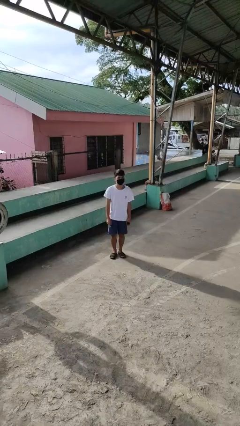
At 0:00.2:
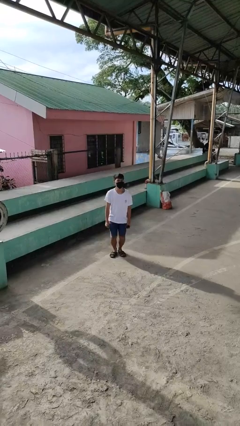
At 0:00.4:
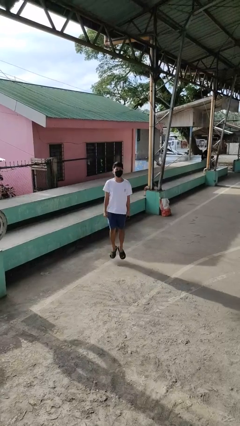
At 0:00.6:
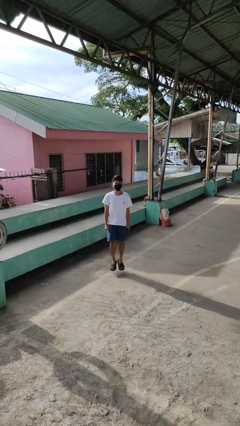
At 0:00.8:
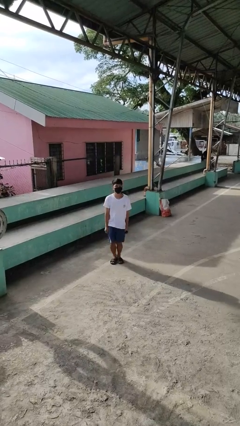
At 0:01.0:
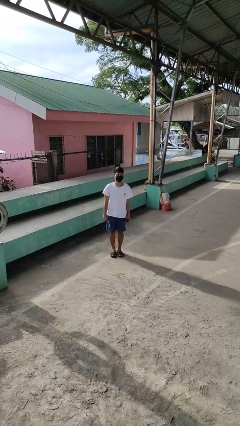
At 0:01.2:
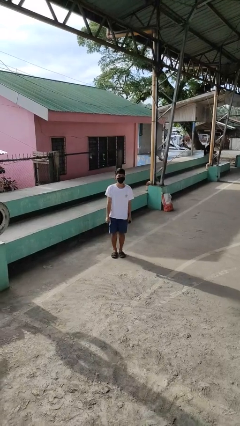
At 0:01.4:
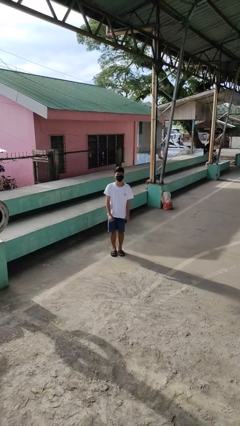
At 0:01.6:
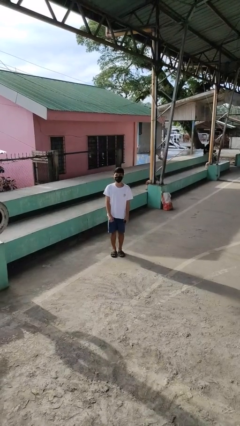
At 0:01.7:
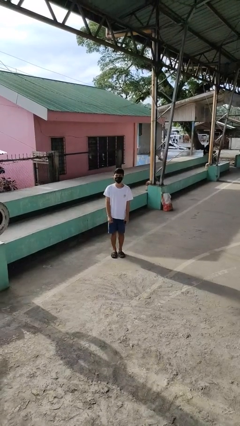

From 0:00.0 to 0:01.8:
person jumps

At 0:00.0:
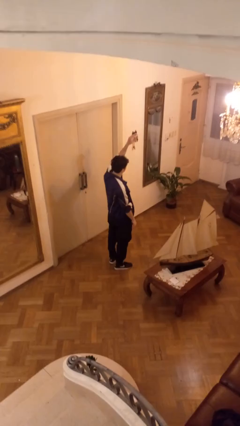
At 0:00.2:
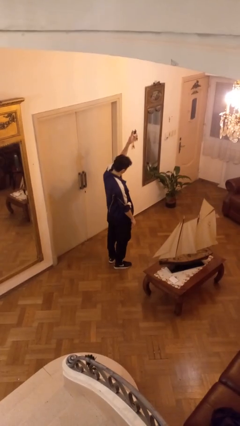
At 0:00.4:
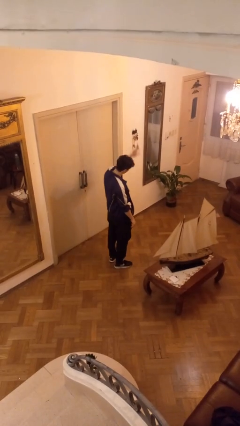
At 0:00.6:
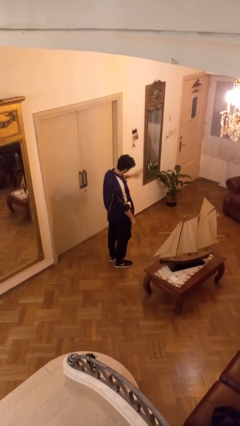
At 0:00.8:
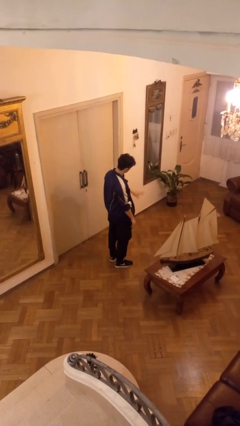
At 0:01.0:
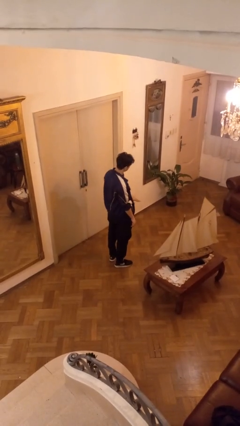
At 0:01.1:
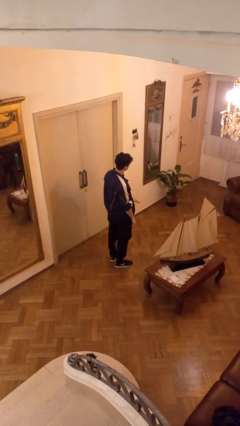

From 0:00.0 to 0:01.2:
person gestures swipe down

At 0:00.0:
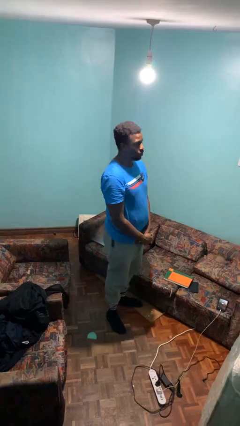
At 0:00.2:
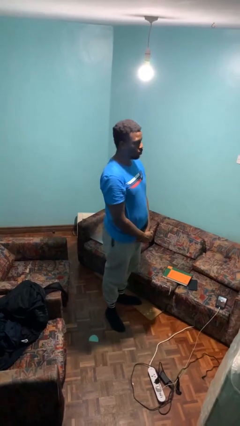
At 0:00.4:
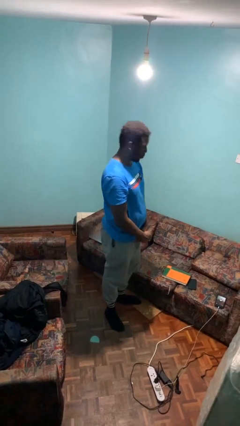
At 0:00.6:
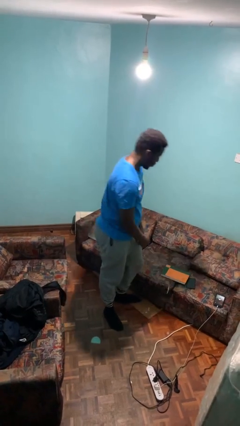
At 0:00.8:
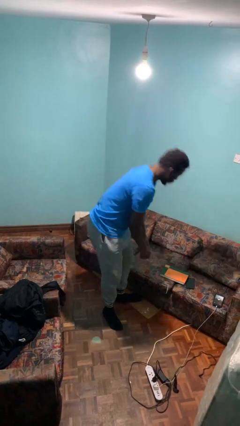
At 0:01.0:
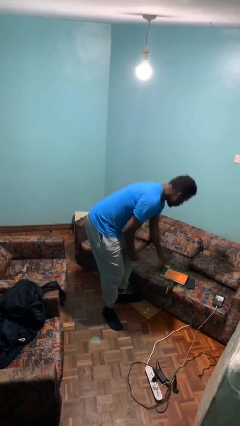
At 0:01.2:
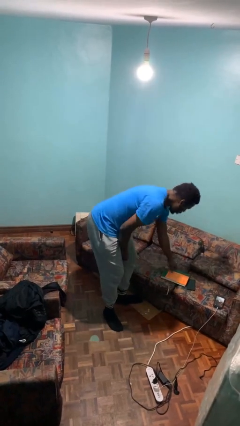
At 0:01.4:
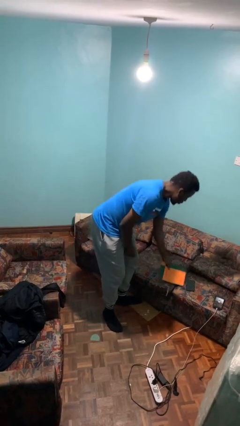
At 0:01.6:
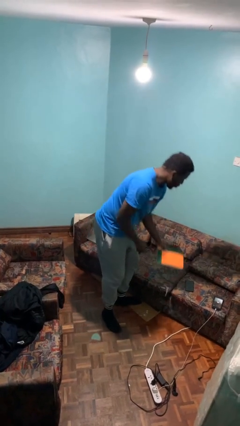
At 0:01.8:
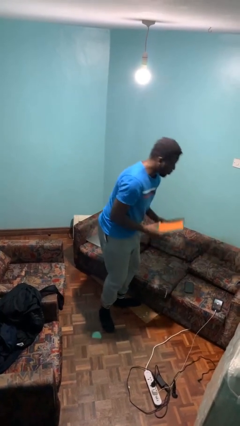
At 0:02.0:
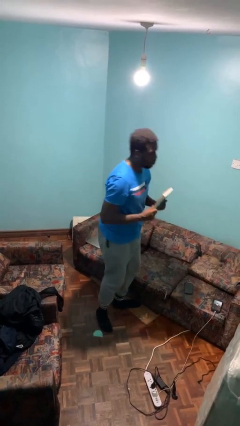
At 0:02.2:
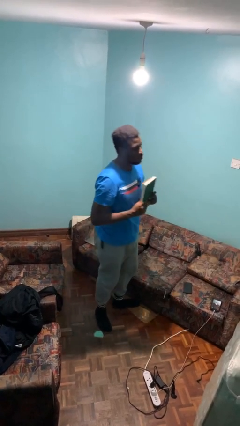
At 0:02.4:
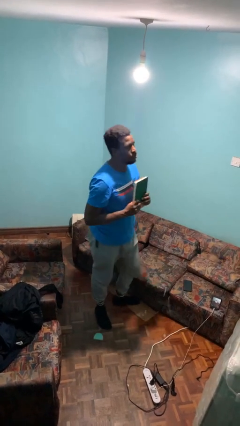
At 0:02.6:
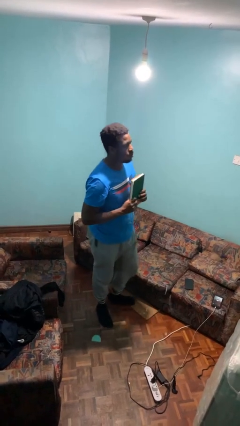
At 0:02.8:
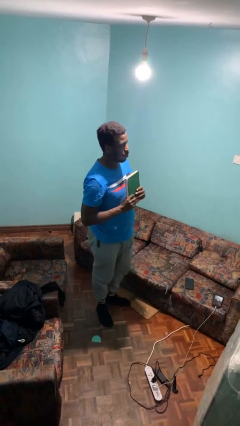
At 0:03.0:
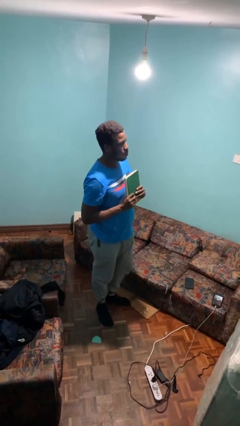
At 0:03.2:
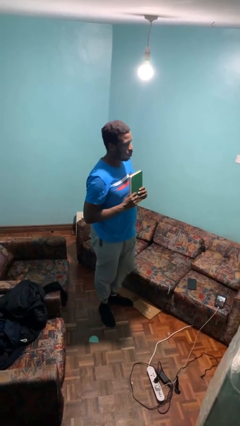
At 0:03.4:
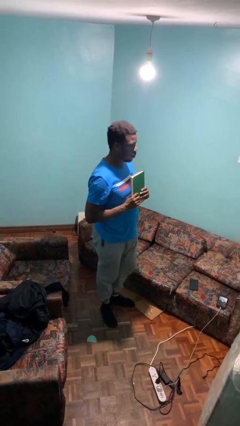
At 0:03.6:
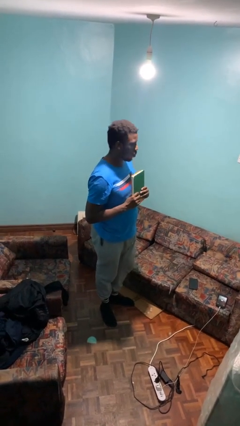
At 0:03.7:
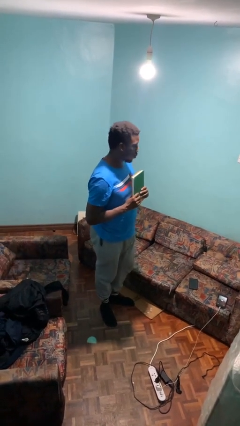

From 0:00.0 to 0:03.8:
person picks up object from couch

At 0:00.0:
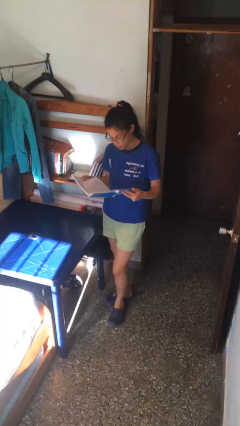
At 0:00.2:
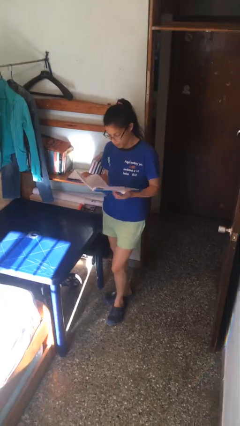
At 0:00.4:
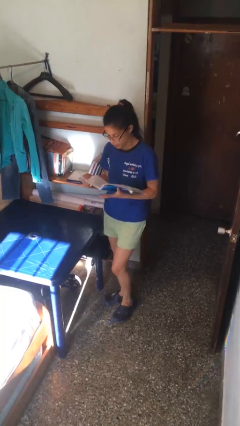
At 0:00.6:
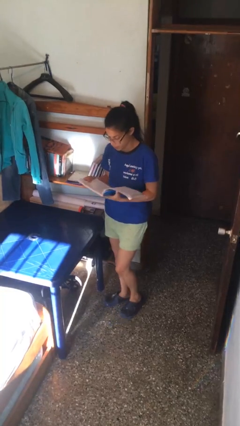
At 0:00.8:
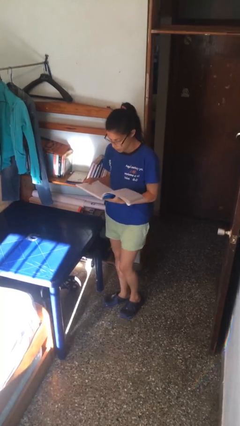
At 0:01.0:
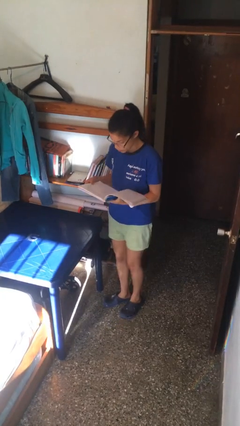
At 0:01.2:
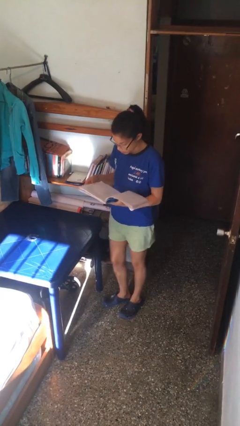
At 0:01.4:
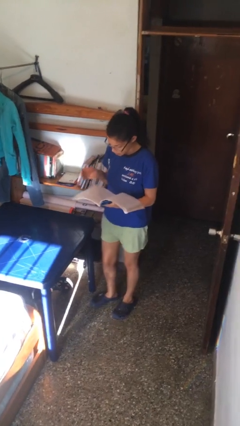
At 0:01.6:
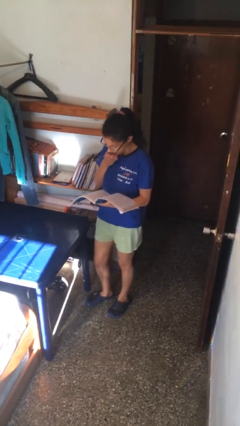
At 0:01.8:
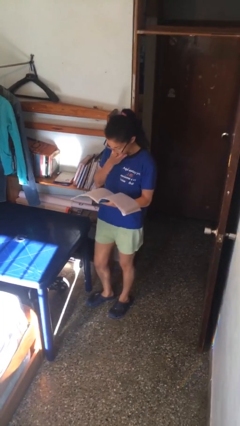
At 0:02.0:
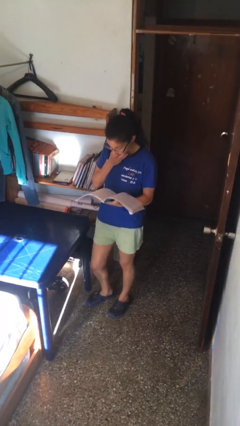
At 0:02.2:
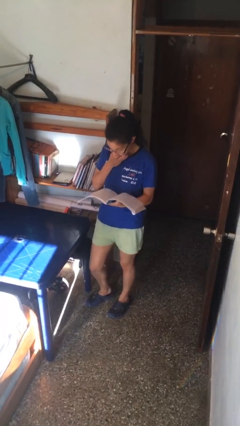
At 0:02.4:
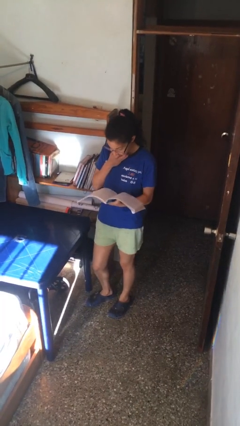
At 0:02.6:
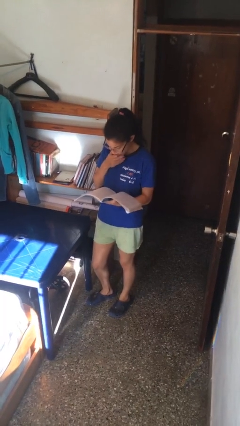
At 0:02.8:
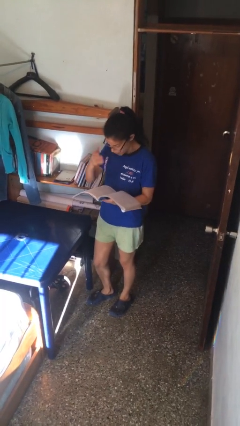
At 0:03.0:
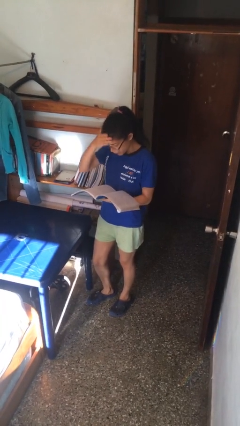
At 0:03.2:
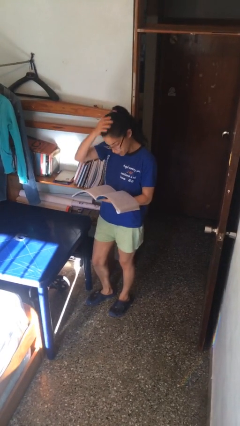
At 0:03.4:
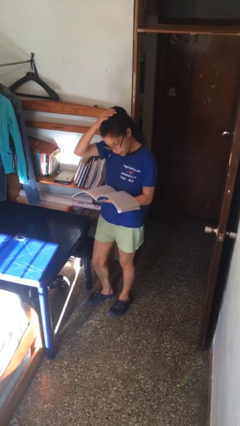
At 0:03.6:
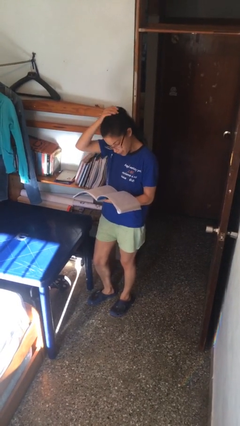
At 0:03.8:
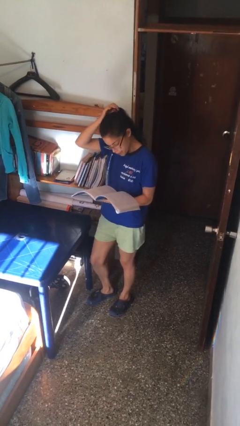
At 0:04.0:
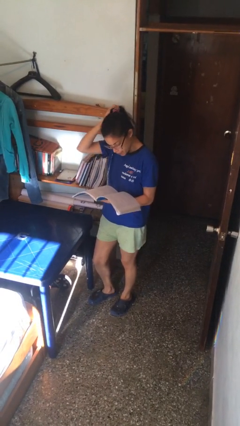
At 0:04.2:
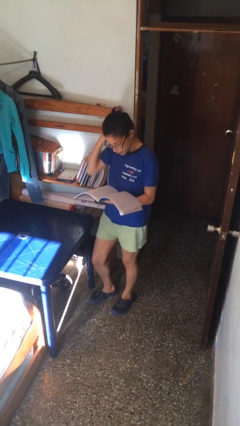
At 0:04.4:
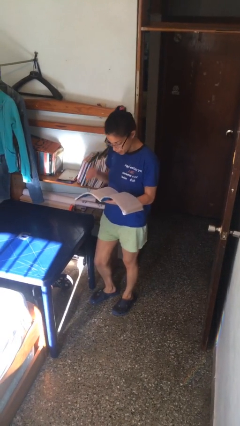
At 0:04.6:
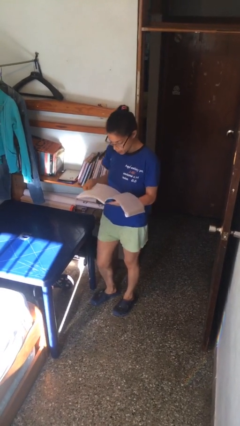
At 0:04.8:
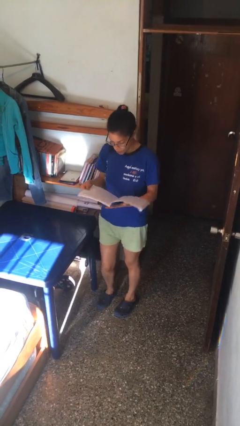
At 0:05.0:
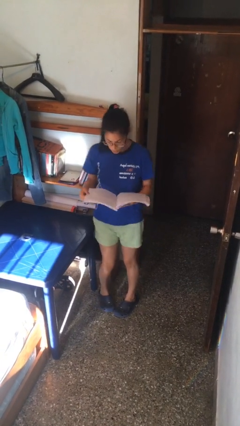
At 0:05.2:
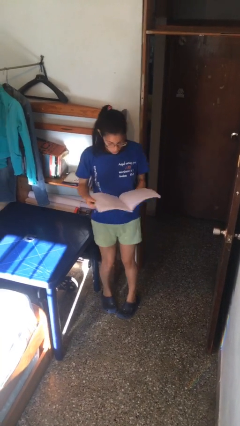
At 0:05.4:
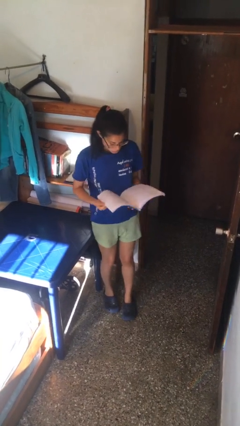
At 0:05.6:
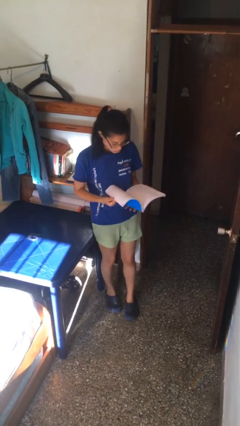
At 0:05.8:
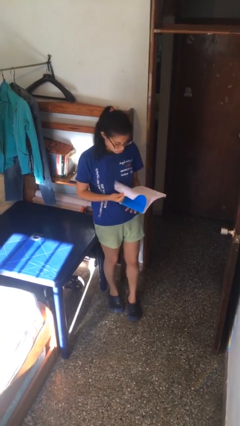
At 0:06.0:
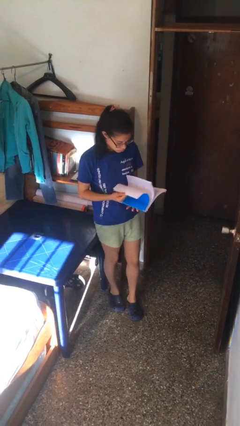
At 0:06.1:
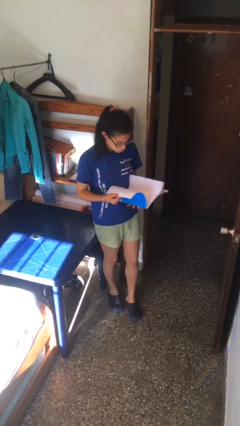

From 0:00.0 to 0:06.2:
person reads document

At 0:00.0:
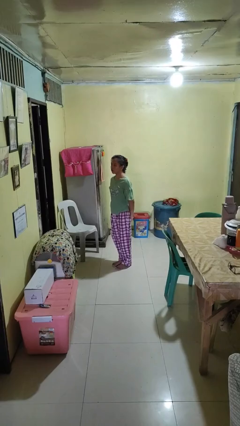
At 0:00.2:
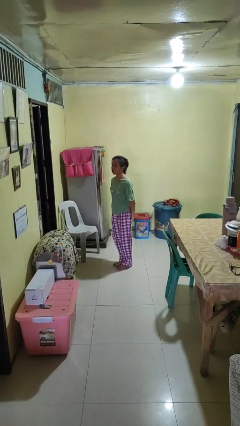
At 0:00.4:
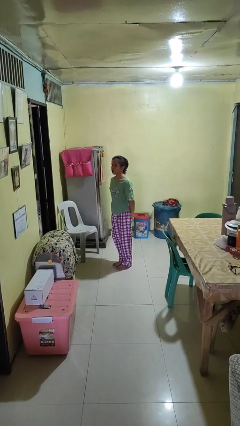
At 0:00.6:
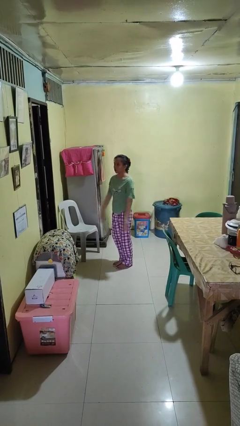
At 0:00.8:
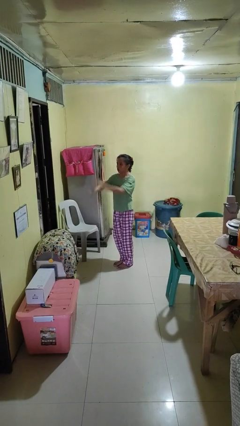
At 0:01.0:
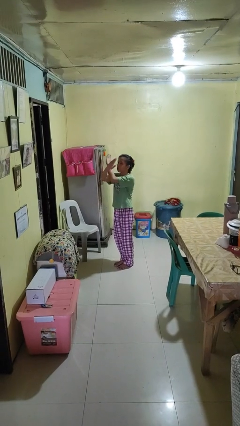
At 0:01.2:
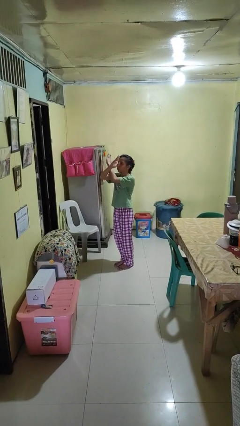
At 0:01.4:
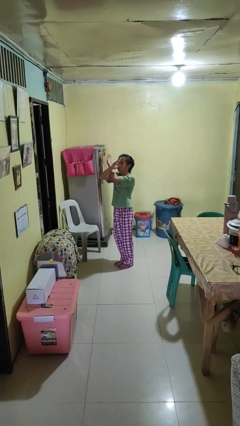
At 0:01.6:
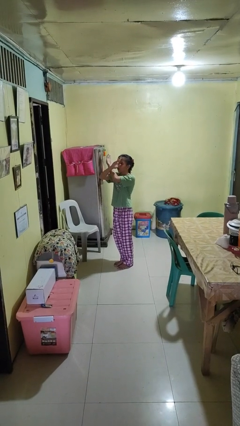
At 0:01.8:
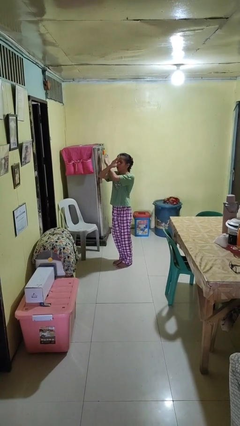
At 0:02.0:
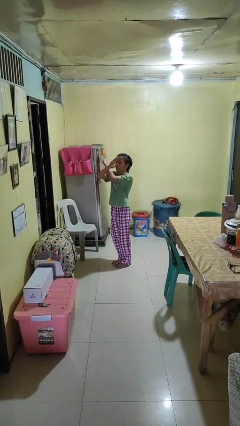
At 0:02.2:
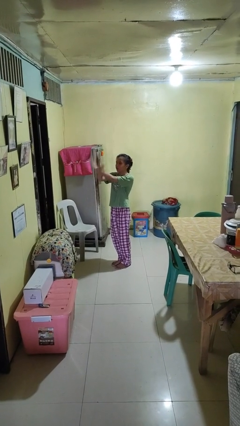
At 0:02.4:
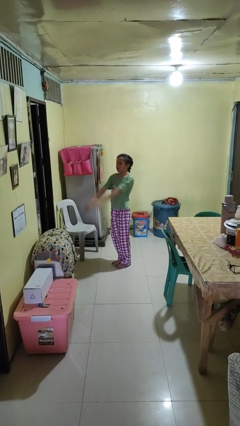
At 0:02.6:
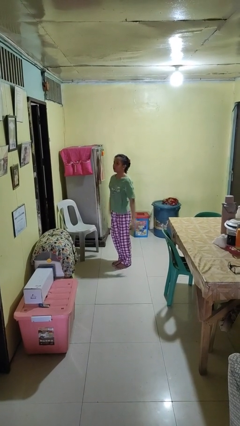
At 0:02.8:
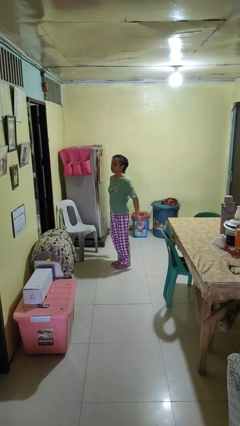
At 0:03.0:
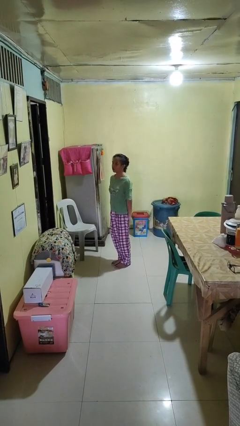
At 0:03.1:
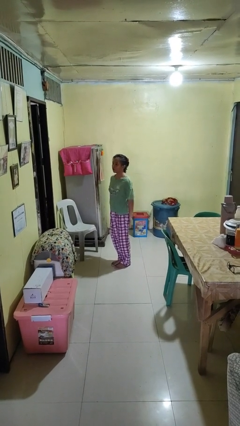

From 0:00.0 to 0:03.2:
person gestures arms x

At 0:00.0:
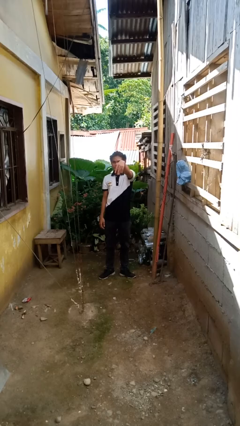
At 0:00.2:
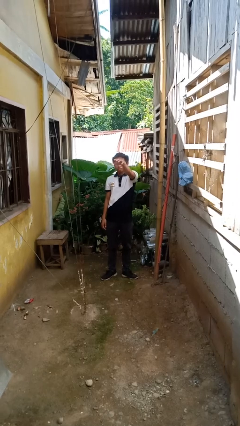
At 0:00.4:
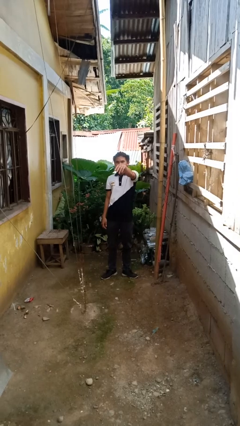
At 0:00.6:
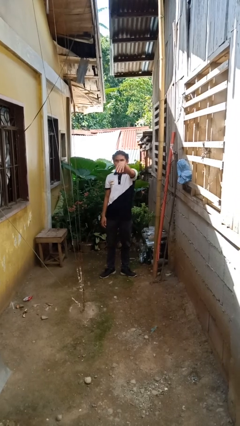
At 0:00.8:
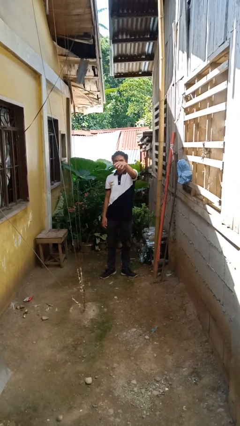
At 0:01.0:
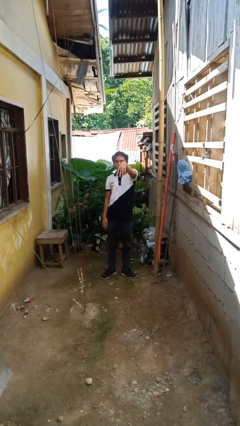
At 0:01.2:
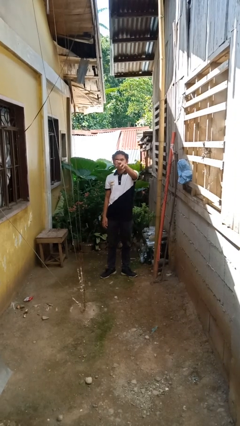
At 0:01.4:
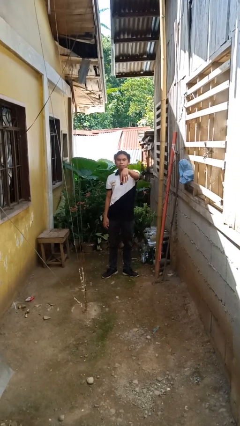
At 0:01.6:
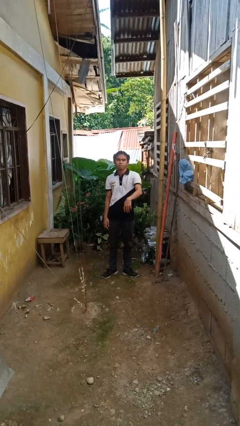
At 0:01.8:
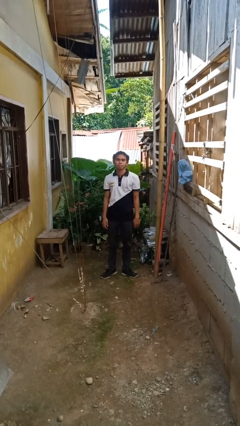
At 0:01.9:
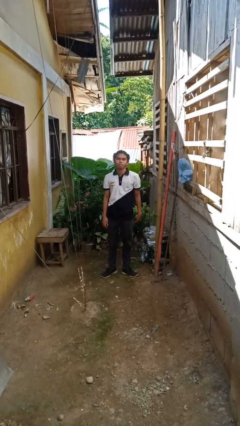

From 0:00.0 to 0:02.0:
person gestures come here
